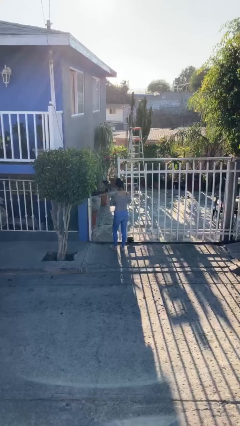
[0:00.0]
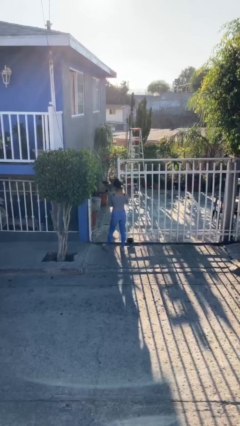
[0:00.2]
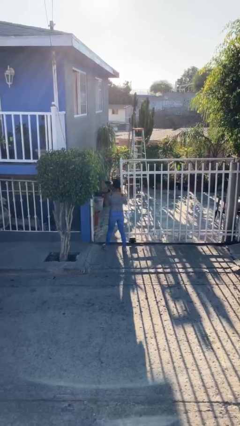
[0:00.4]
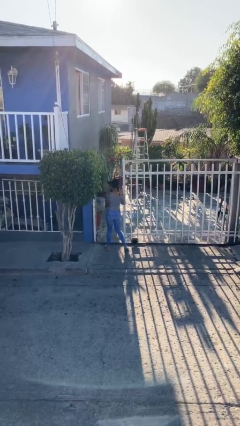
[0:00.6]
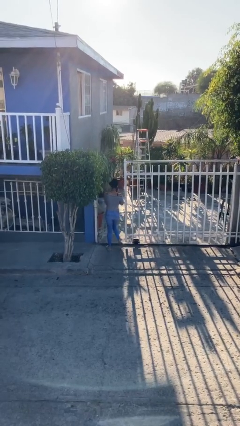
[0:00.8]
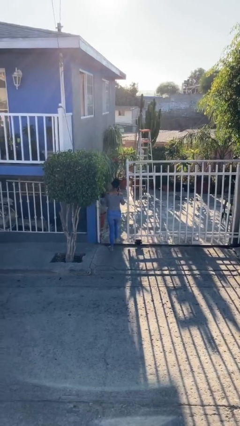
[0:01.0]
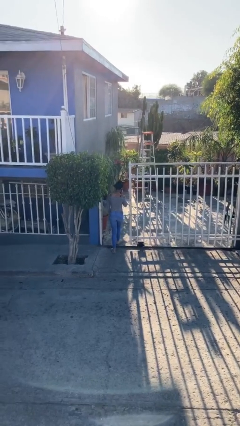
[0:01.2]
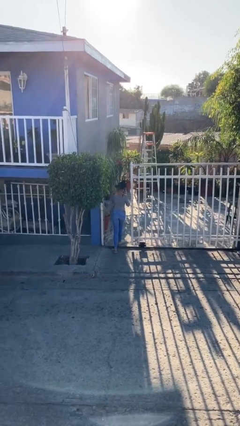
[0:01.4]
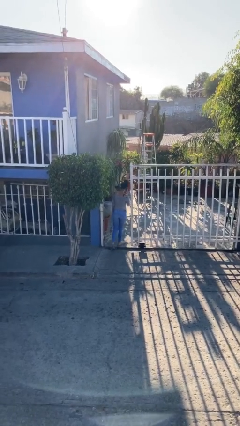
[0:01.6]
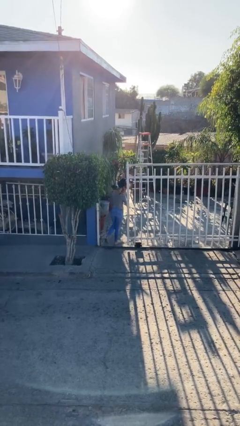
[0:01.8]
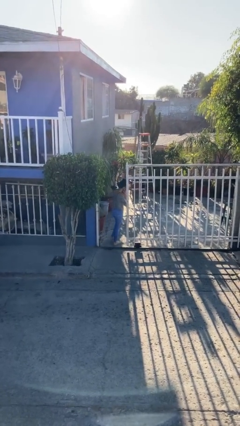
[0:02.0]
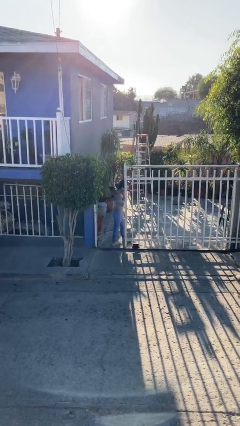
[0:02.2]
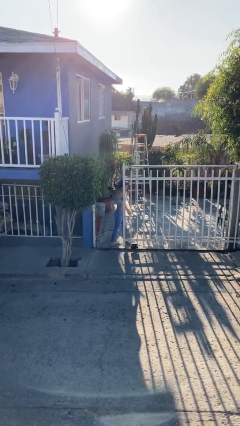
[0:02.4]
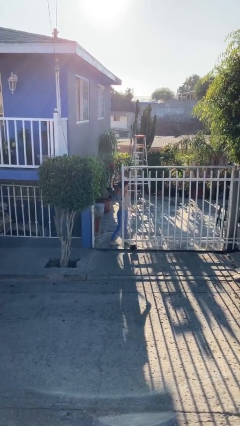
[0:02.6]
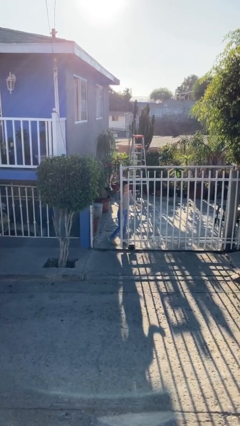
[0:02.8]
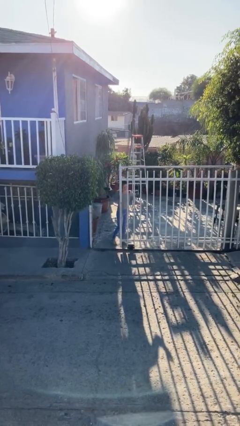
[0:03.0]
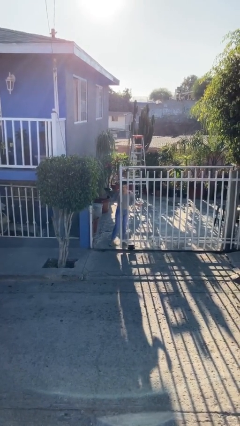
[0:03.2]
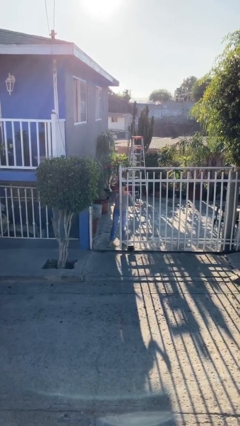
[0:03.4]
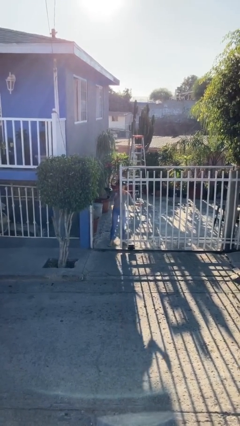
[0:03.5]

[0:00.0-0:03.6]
person exits scene through structure

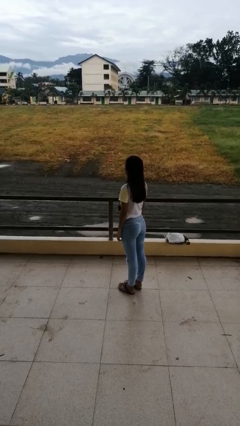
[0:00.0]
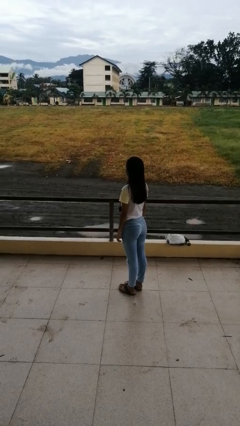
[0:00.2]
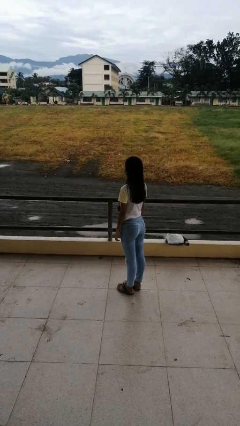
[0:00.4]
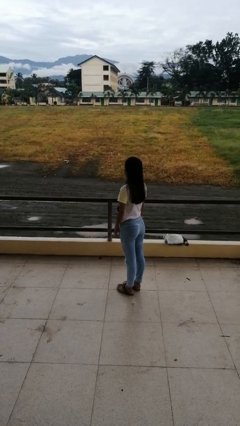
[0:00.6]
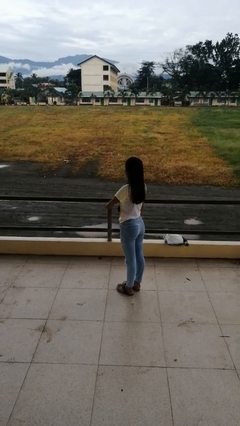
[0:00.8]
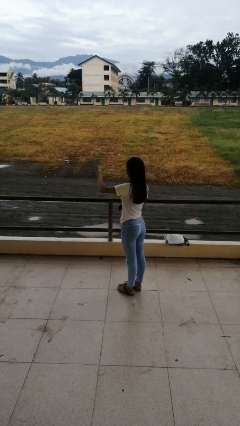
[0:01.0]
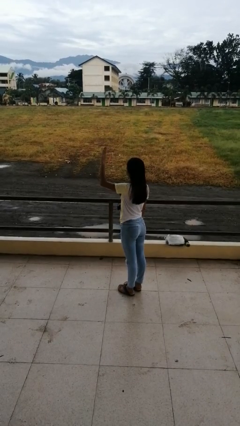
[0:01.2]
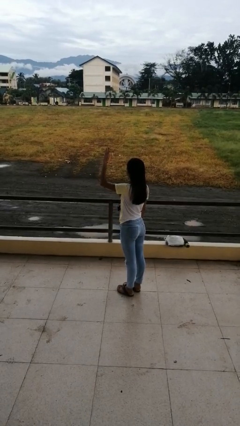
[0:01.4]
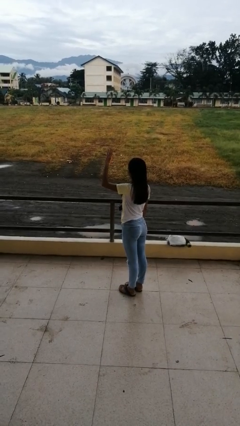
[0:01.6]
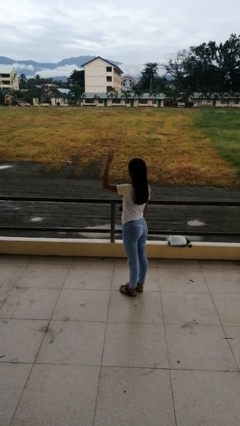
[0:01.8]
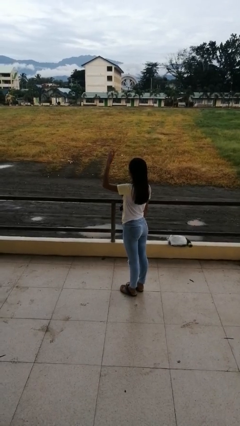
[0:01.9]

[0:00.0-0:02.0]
person gestures swipe up

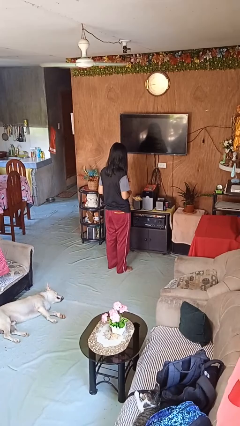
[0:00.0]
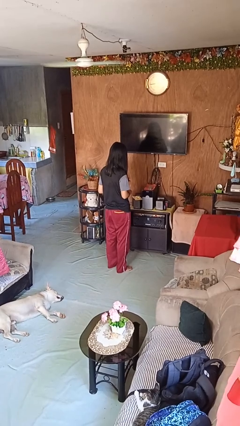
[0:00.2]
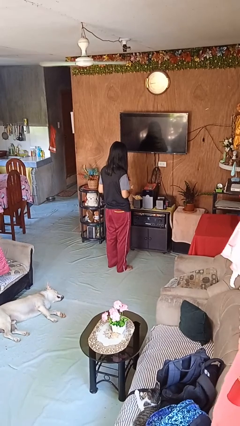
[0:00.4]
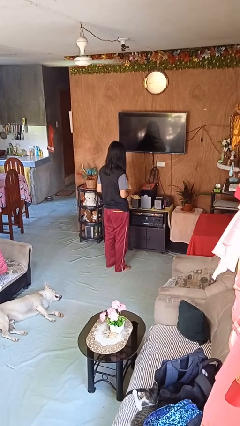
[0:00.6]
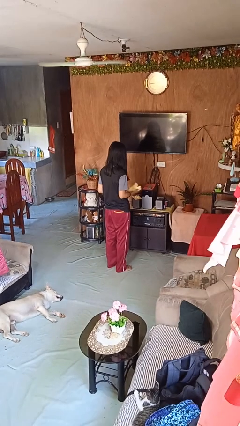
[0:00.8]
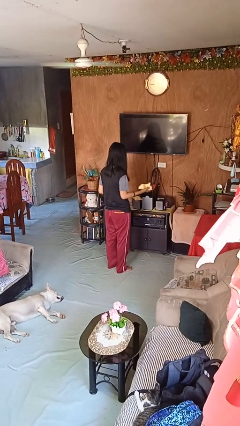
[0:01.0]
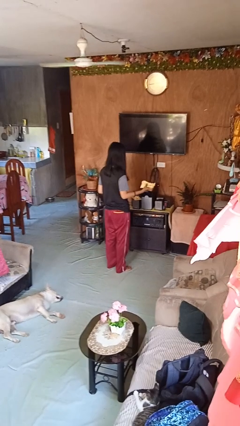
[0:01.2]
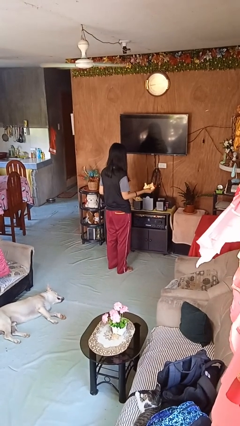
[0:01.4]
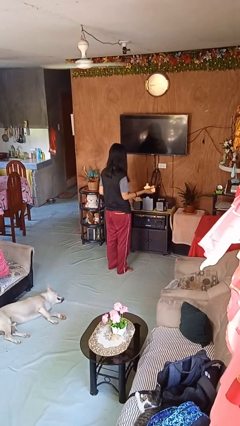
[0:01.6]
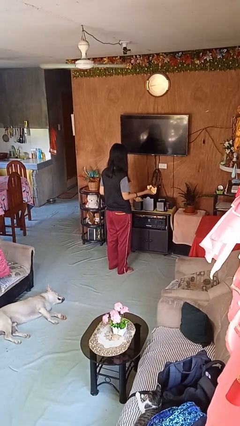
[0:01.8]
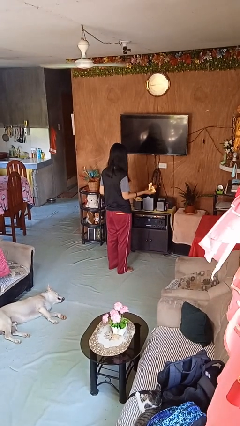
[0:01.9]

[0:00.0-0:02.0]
person crumples paper

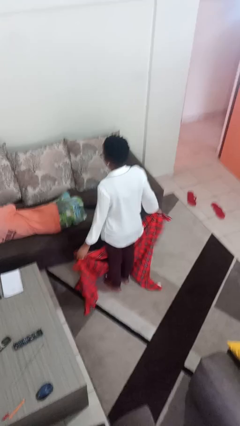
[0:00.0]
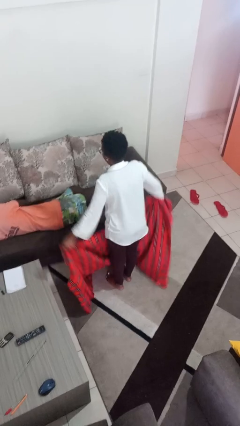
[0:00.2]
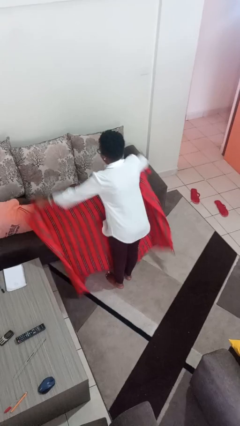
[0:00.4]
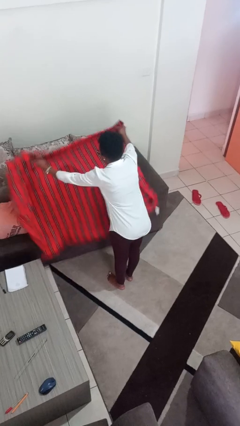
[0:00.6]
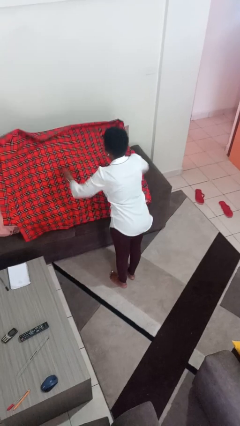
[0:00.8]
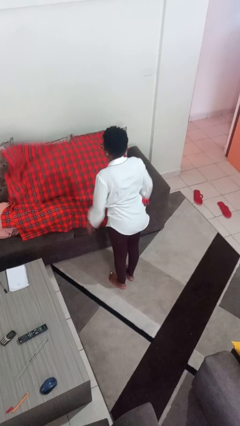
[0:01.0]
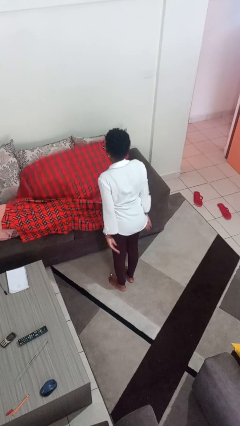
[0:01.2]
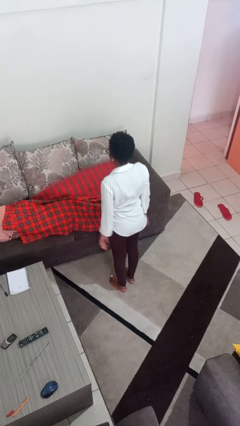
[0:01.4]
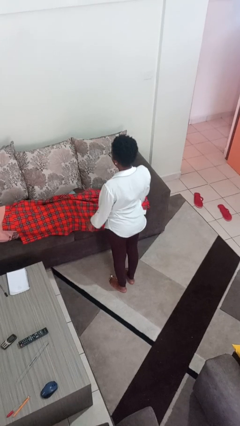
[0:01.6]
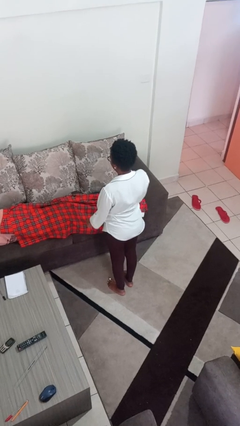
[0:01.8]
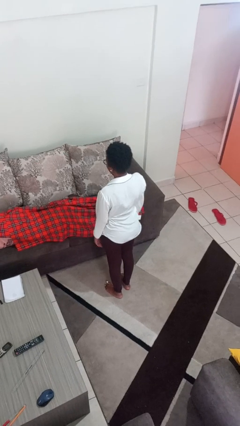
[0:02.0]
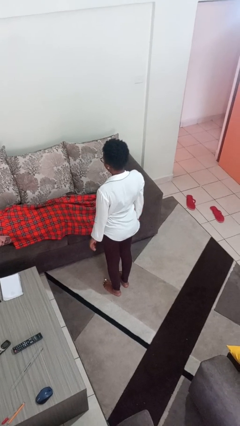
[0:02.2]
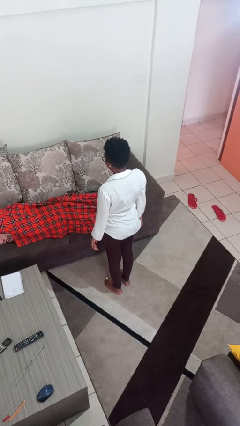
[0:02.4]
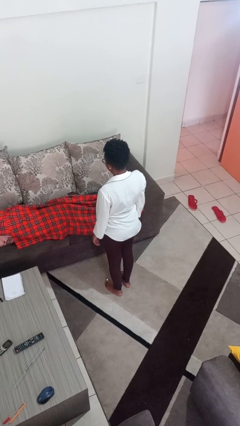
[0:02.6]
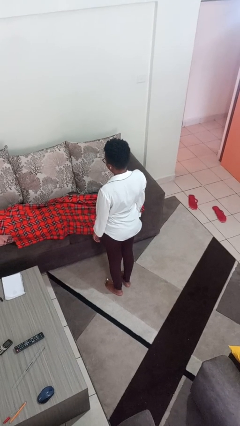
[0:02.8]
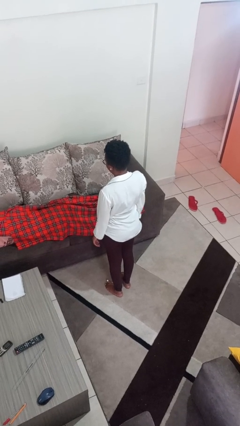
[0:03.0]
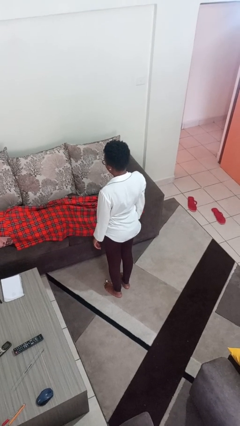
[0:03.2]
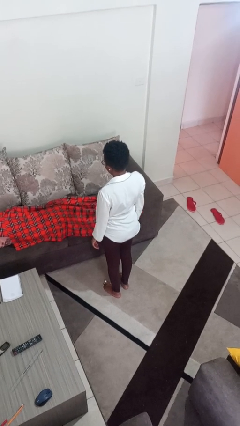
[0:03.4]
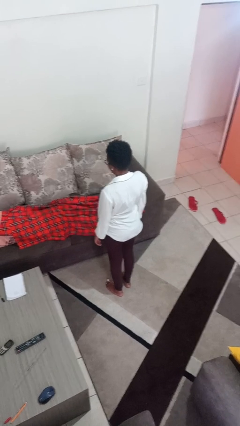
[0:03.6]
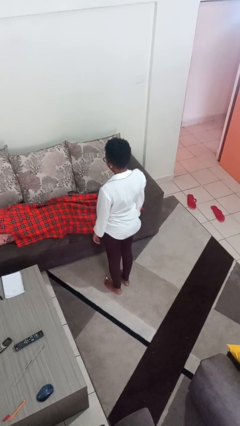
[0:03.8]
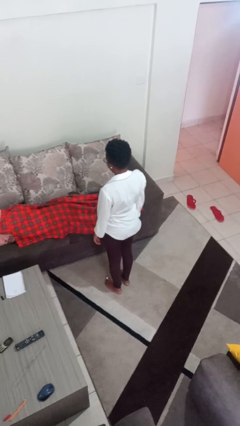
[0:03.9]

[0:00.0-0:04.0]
person covers friend with blanket

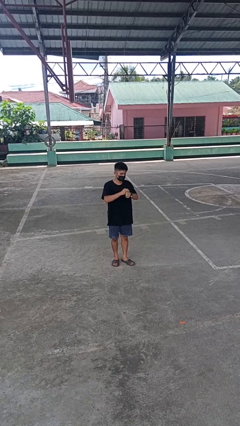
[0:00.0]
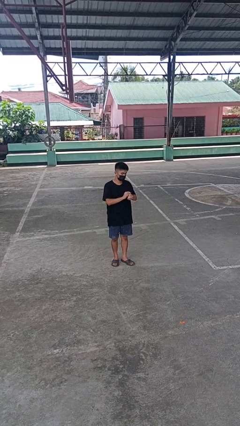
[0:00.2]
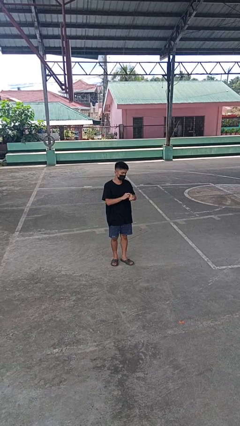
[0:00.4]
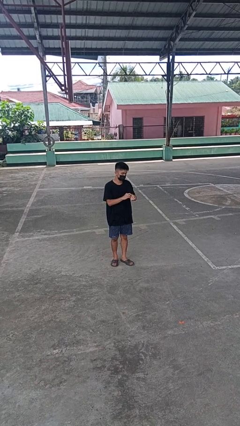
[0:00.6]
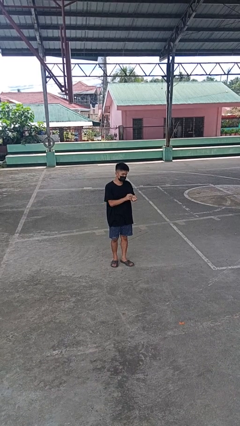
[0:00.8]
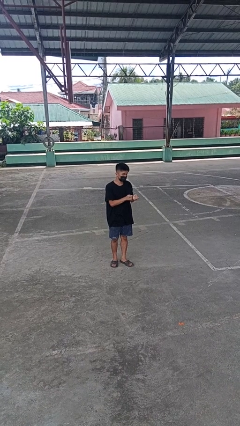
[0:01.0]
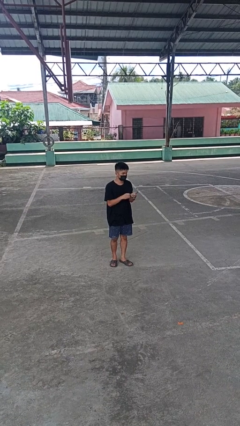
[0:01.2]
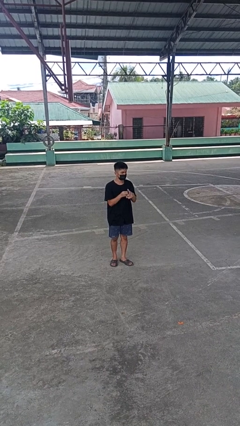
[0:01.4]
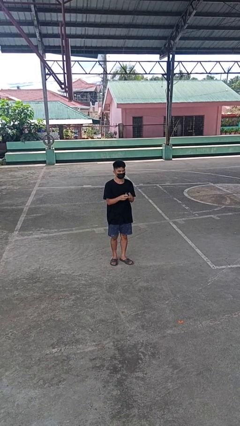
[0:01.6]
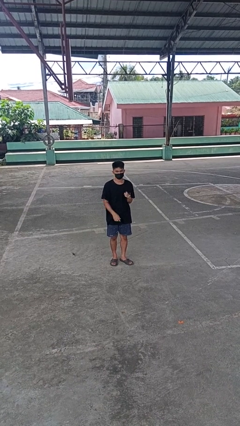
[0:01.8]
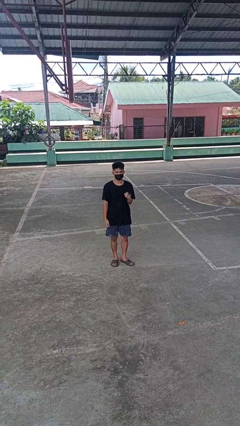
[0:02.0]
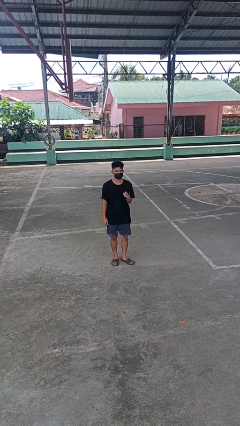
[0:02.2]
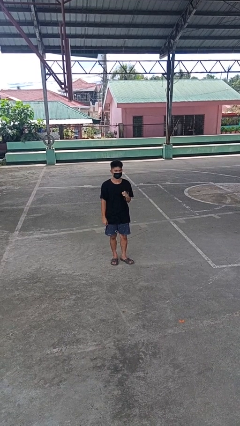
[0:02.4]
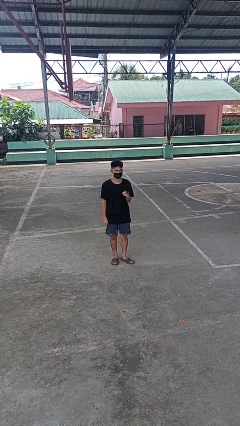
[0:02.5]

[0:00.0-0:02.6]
person takes off wristwatch

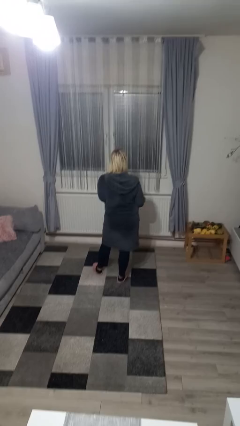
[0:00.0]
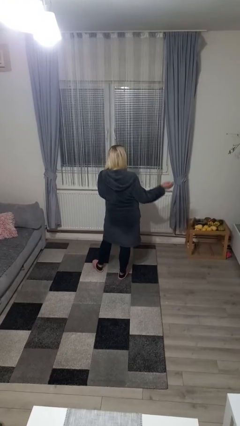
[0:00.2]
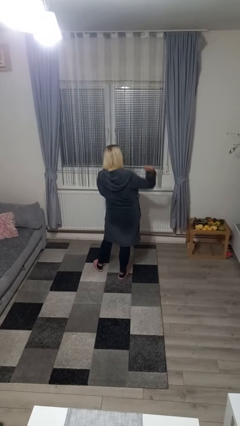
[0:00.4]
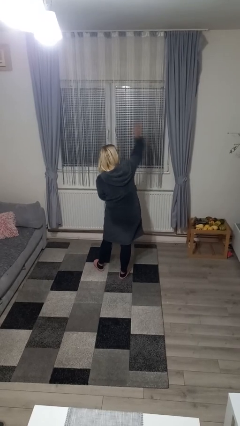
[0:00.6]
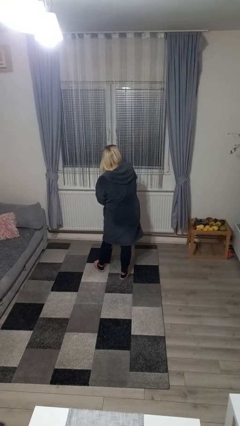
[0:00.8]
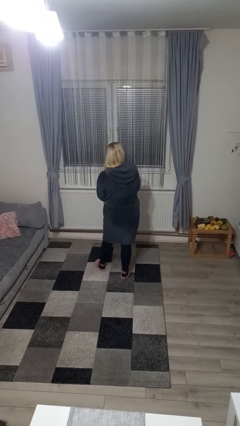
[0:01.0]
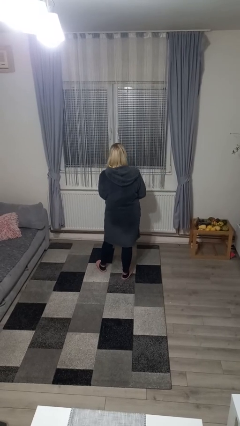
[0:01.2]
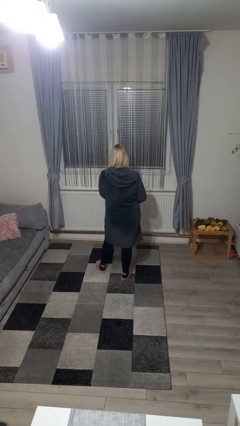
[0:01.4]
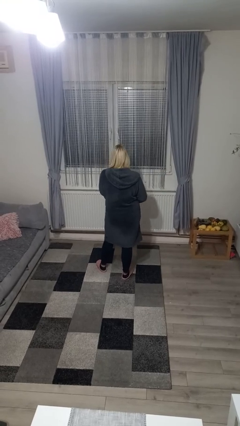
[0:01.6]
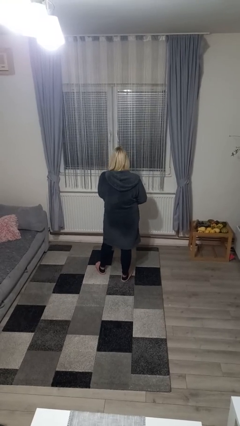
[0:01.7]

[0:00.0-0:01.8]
person swats bug

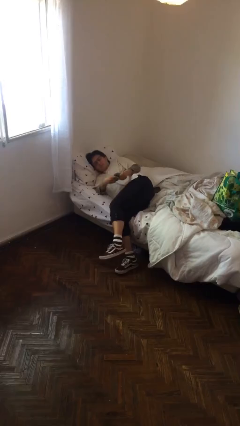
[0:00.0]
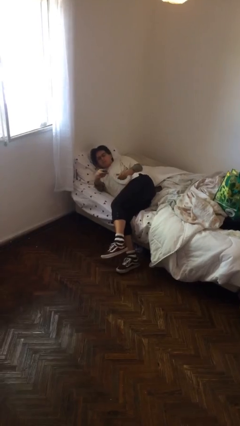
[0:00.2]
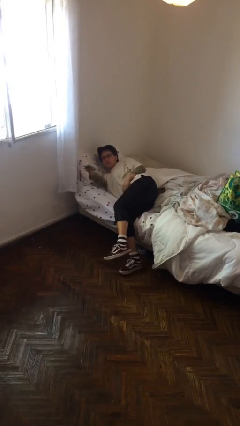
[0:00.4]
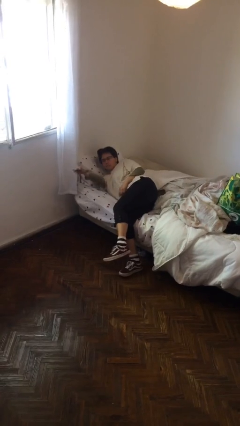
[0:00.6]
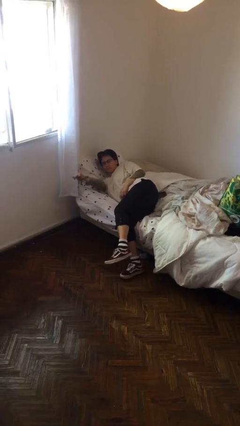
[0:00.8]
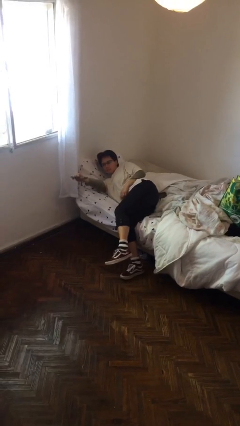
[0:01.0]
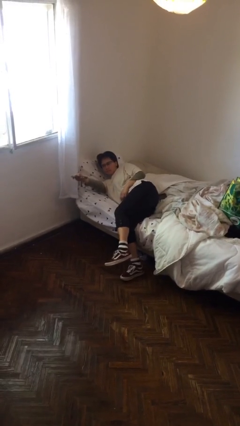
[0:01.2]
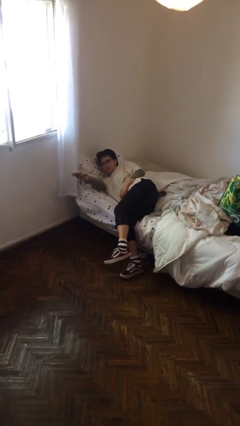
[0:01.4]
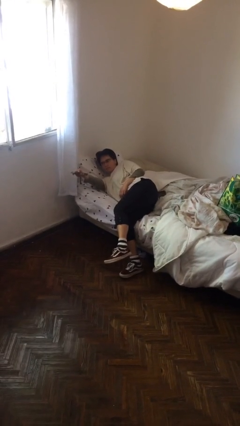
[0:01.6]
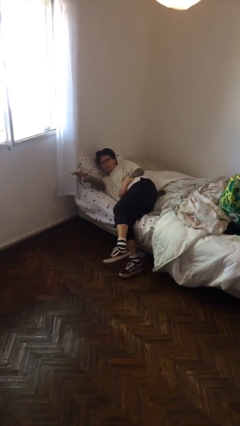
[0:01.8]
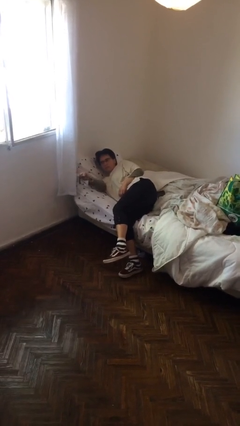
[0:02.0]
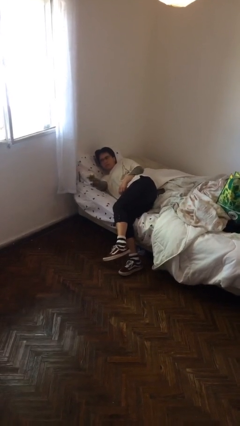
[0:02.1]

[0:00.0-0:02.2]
person uses television remote
